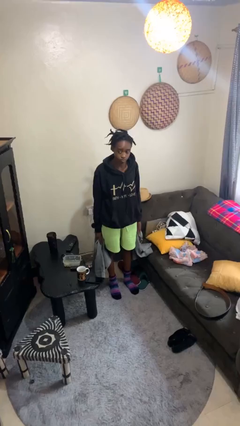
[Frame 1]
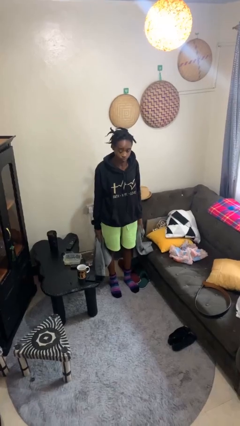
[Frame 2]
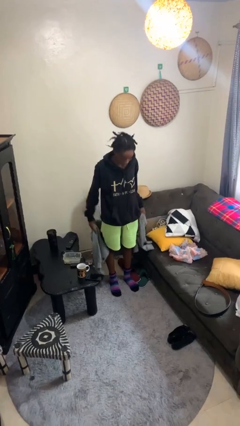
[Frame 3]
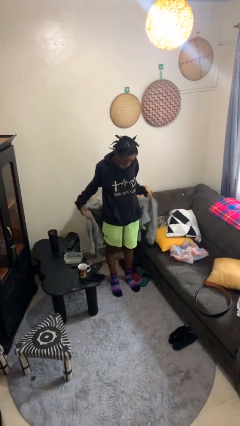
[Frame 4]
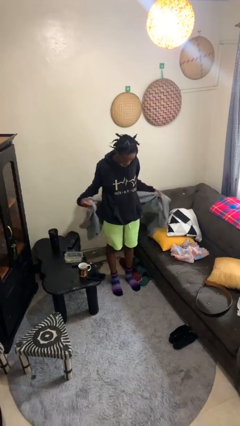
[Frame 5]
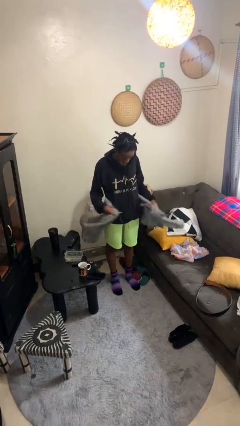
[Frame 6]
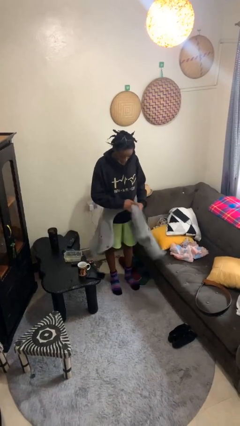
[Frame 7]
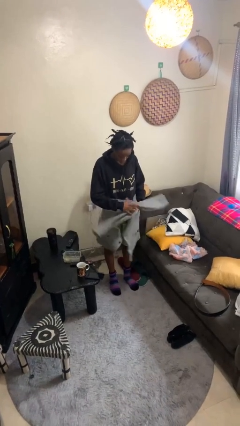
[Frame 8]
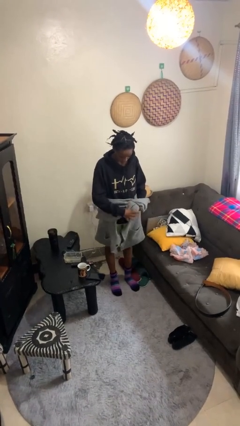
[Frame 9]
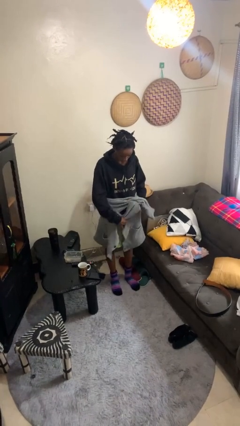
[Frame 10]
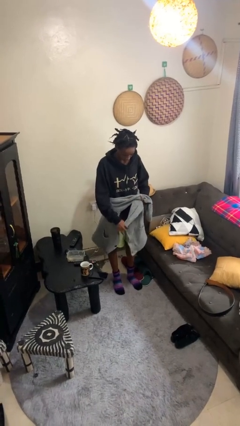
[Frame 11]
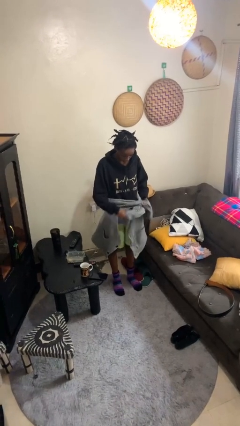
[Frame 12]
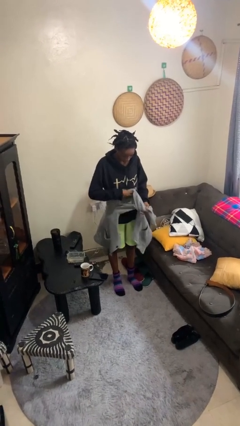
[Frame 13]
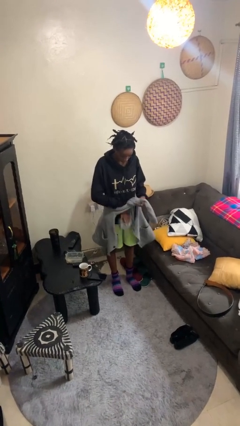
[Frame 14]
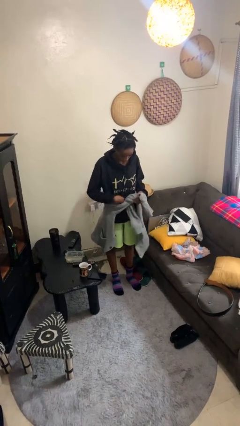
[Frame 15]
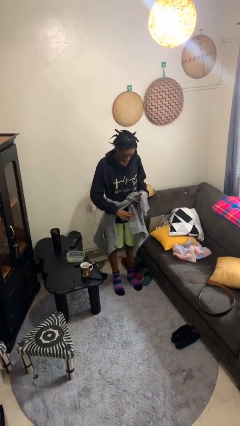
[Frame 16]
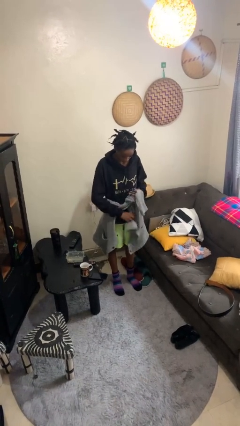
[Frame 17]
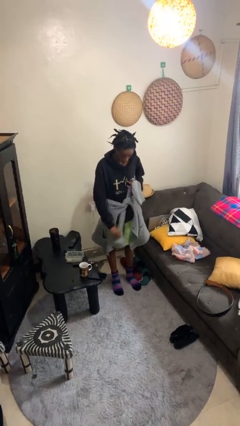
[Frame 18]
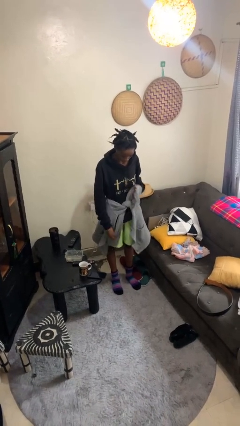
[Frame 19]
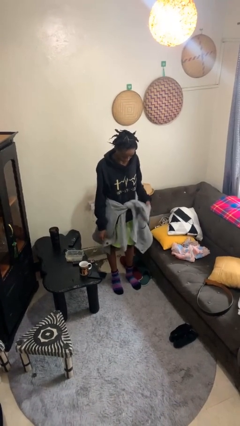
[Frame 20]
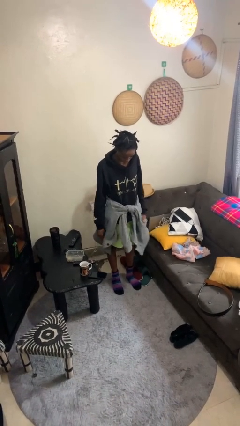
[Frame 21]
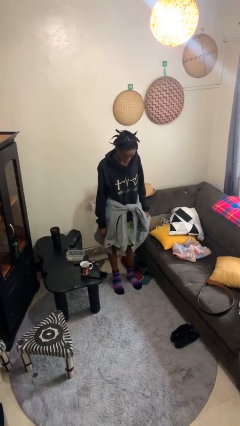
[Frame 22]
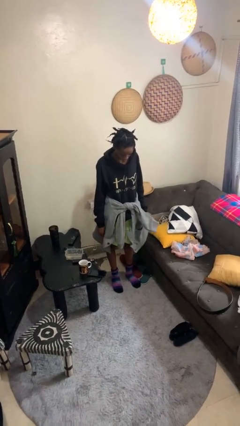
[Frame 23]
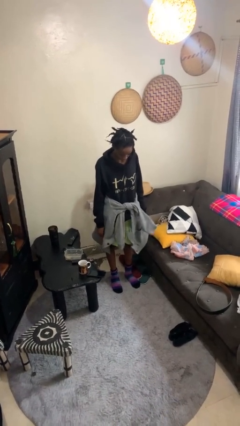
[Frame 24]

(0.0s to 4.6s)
person ties jacket around waist

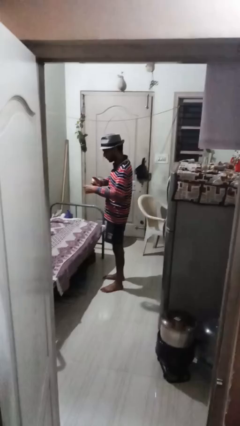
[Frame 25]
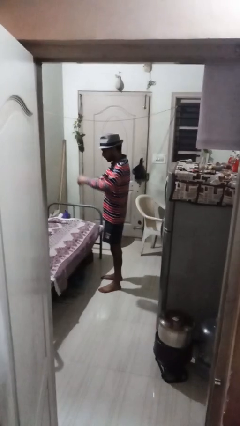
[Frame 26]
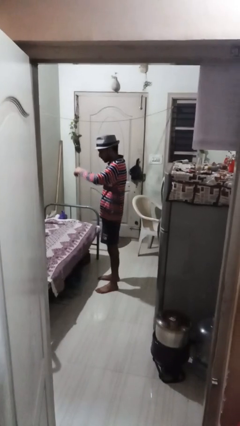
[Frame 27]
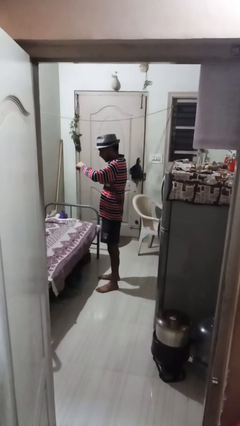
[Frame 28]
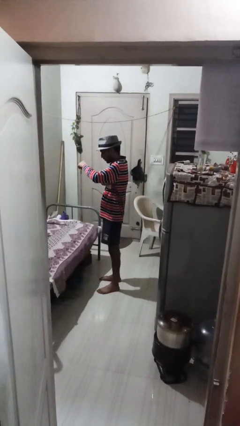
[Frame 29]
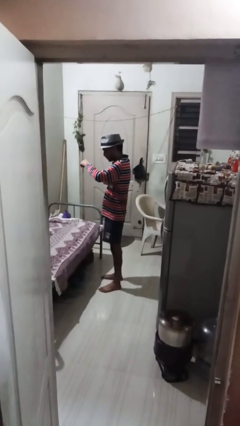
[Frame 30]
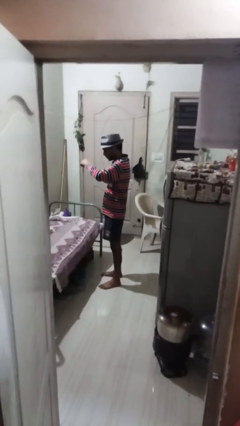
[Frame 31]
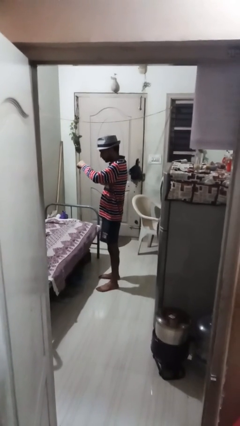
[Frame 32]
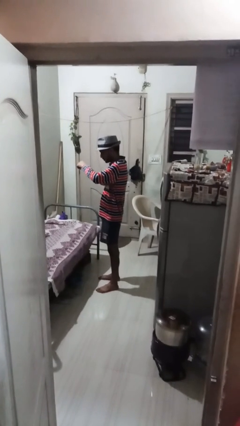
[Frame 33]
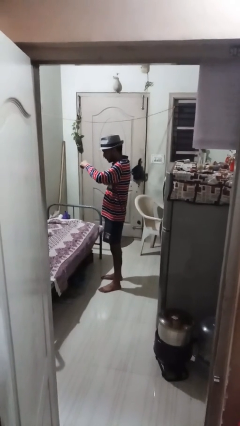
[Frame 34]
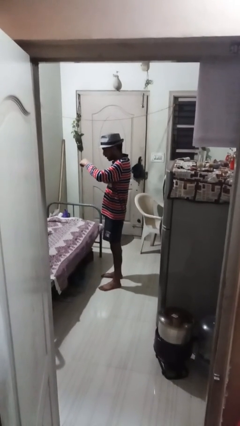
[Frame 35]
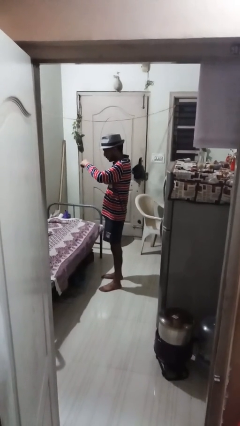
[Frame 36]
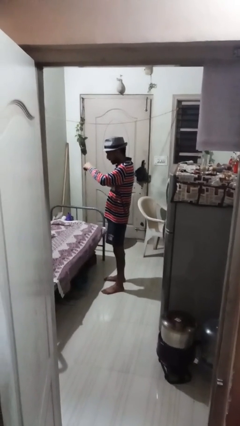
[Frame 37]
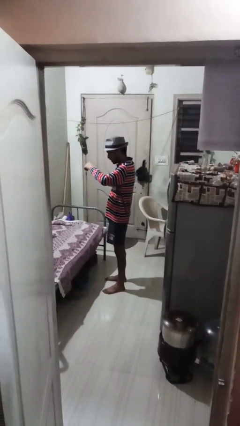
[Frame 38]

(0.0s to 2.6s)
person applies deodorant

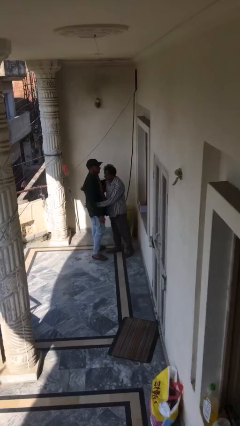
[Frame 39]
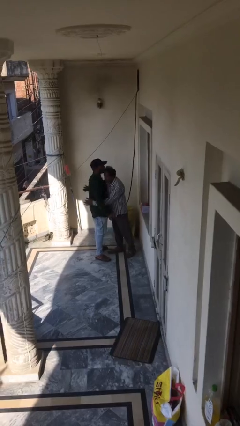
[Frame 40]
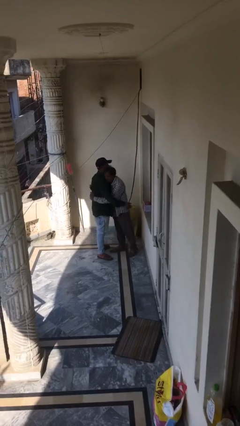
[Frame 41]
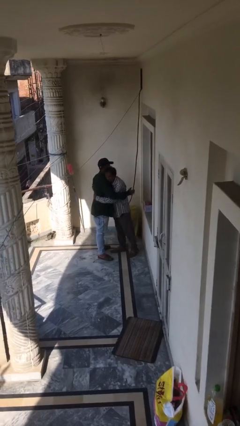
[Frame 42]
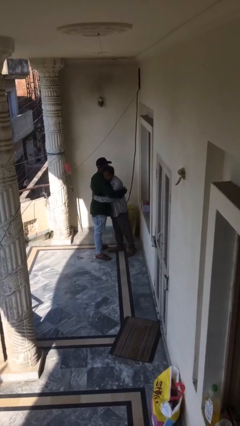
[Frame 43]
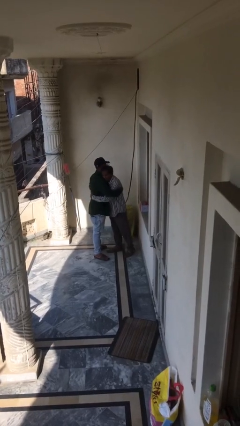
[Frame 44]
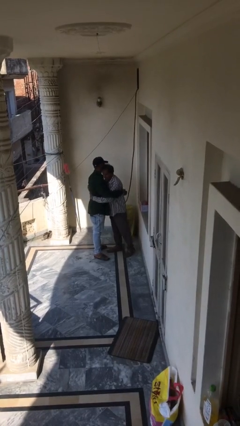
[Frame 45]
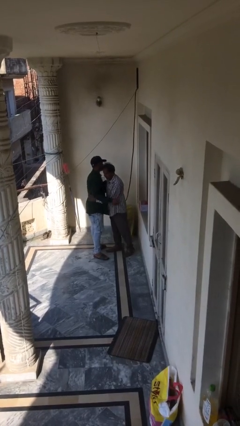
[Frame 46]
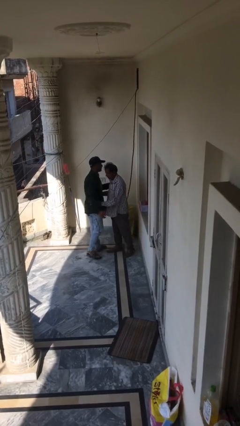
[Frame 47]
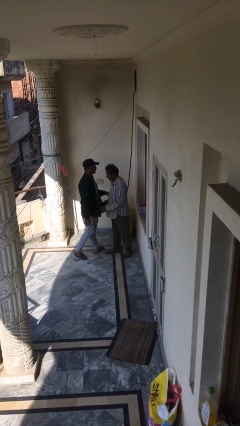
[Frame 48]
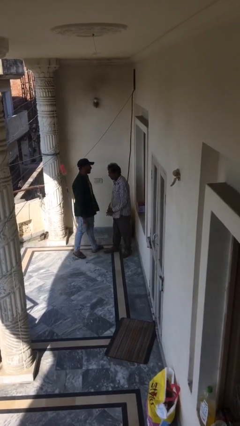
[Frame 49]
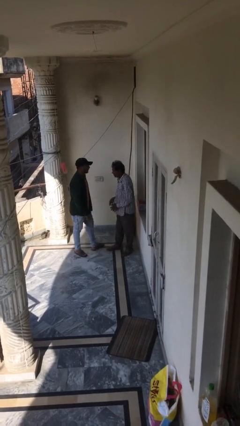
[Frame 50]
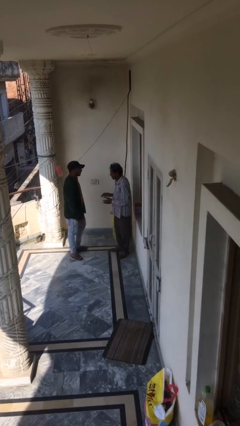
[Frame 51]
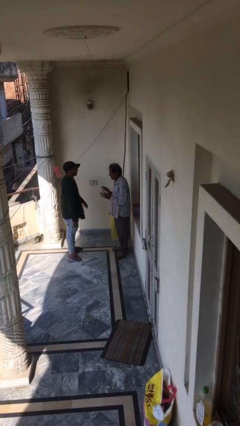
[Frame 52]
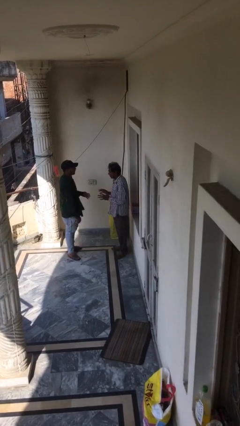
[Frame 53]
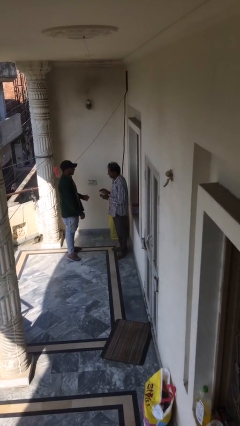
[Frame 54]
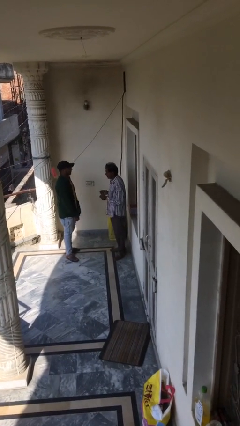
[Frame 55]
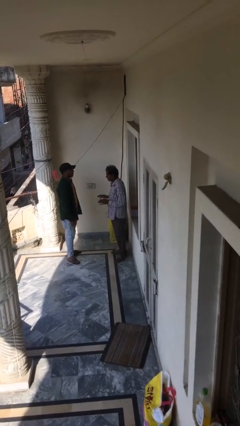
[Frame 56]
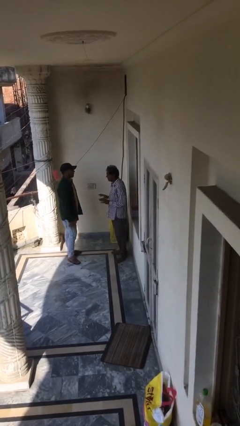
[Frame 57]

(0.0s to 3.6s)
person embraces person

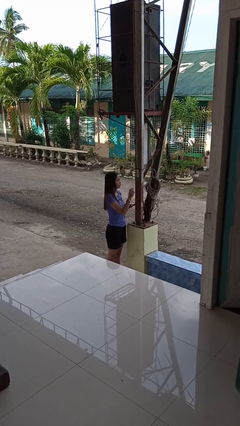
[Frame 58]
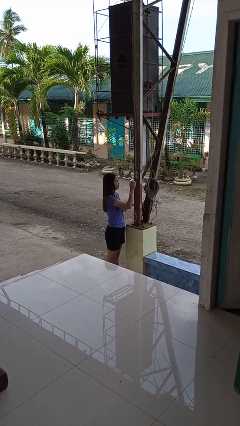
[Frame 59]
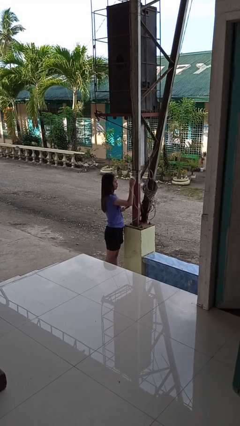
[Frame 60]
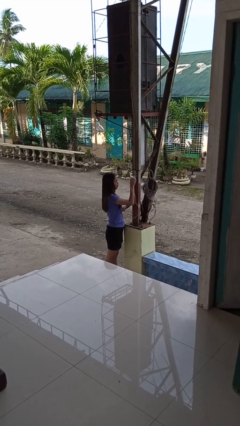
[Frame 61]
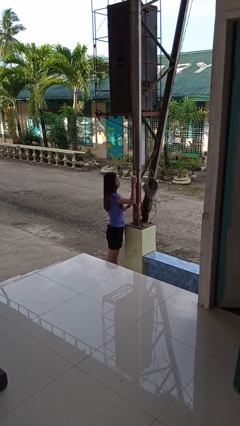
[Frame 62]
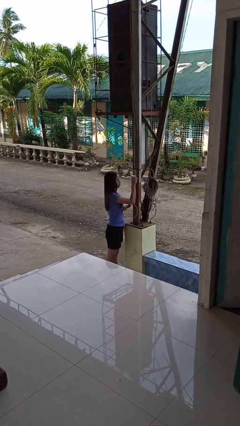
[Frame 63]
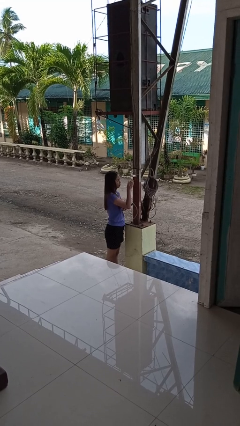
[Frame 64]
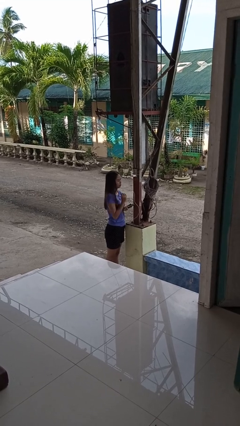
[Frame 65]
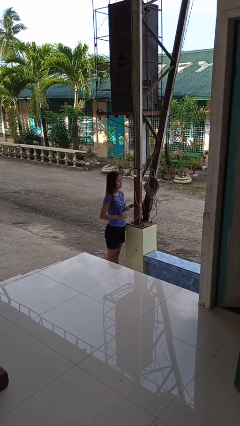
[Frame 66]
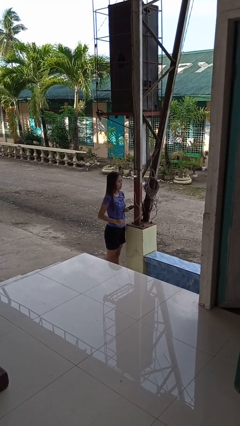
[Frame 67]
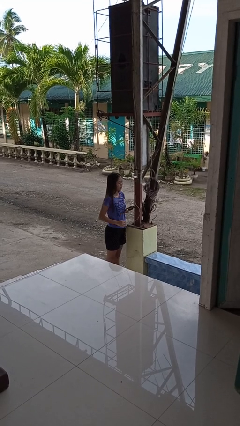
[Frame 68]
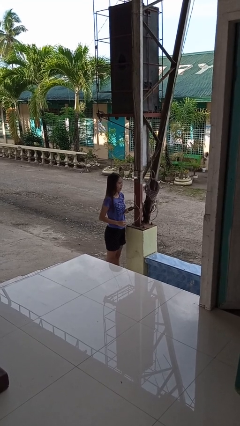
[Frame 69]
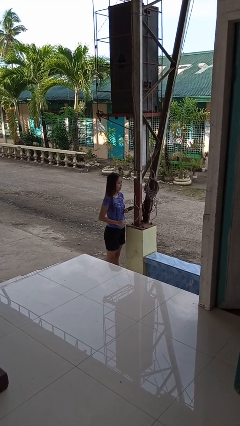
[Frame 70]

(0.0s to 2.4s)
person plugs into electrical socket

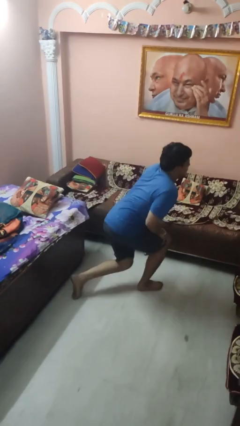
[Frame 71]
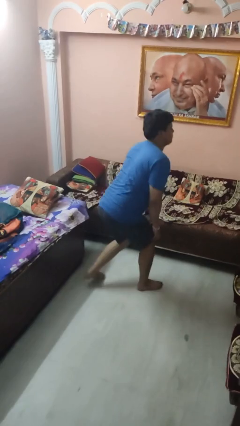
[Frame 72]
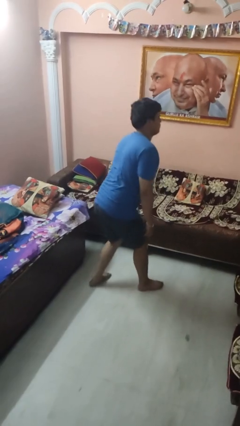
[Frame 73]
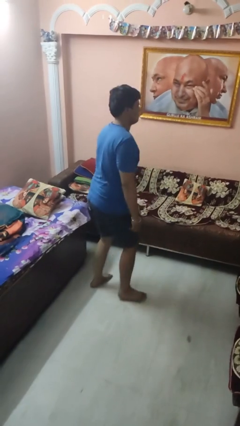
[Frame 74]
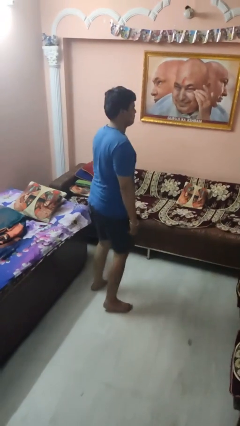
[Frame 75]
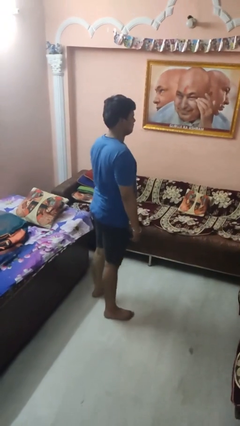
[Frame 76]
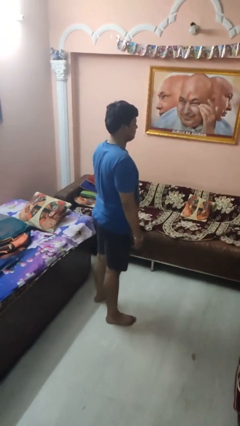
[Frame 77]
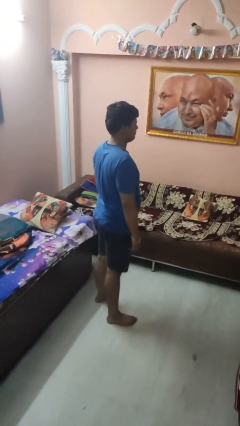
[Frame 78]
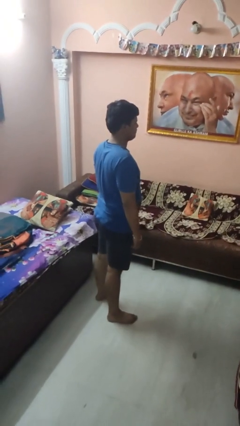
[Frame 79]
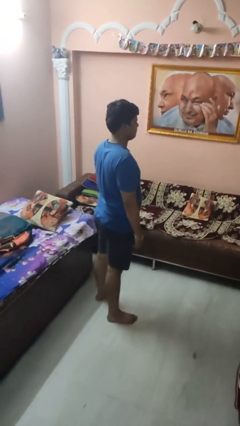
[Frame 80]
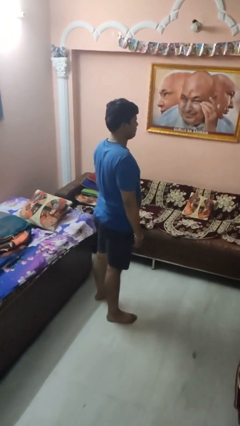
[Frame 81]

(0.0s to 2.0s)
person stands up from floor

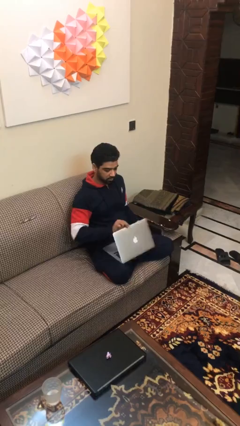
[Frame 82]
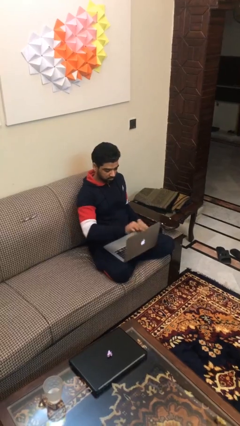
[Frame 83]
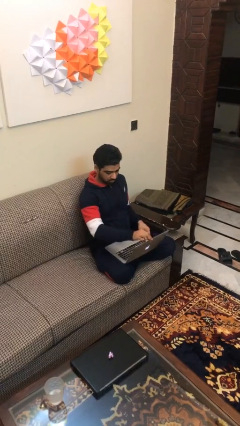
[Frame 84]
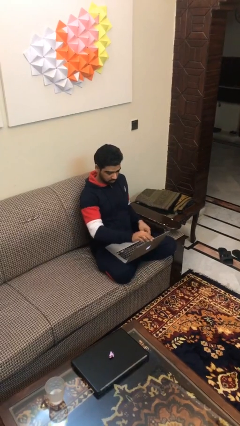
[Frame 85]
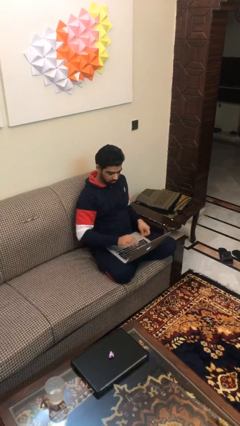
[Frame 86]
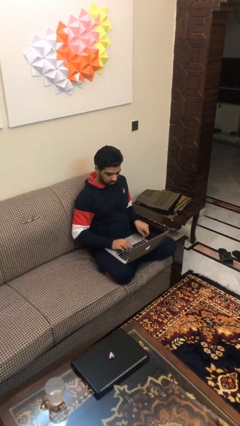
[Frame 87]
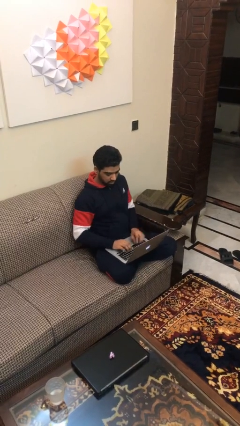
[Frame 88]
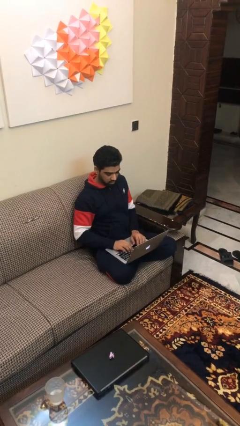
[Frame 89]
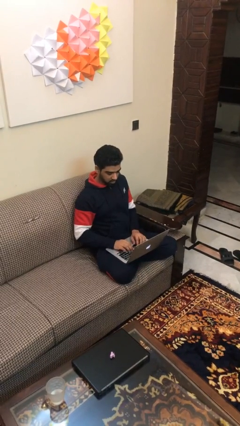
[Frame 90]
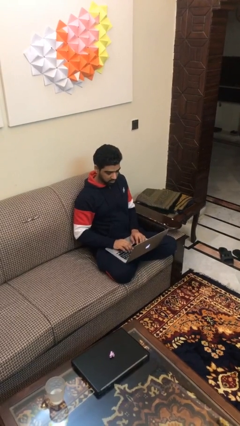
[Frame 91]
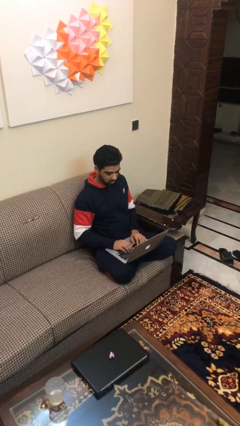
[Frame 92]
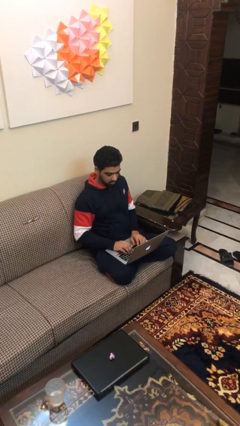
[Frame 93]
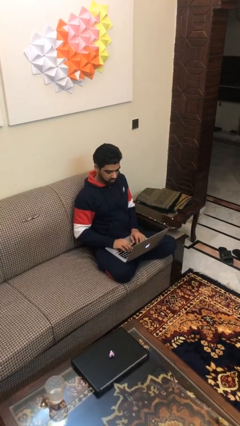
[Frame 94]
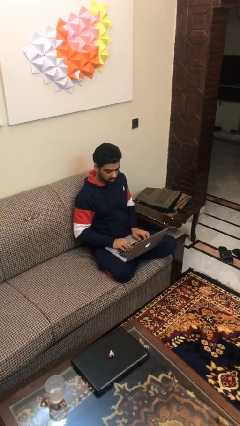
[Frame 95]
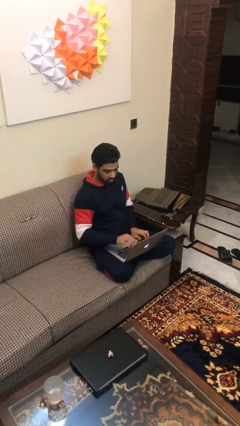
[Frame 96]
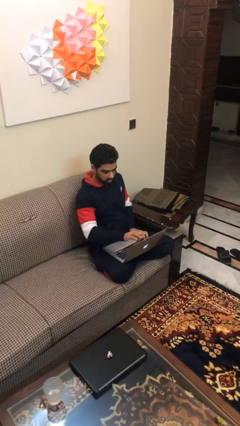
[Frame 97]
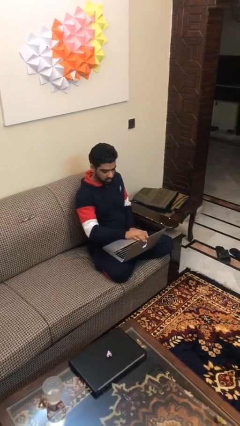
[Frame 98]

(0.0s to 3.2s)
person interacts with laptop
